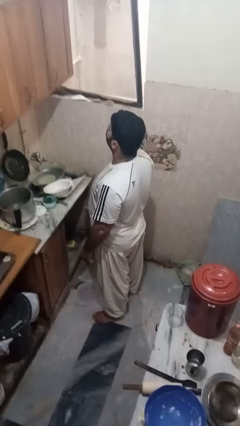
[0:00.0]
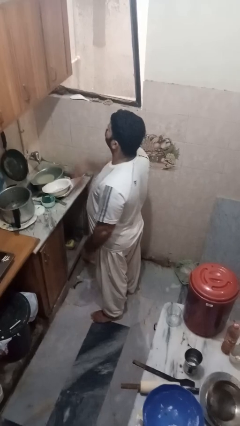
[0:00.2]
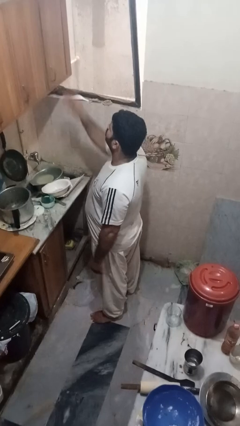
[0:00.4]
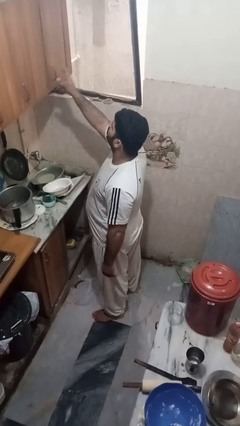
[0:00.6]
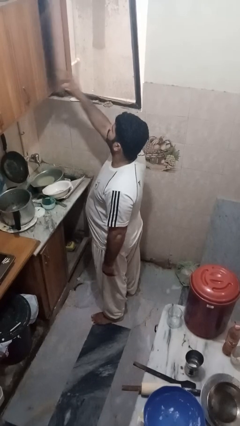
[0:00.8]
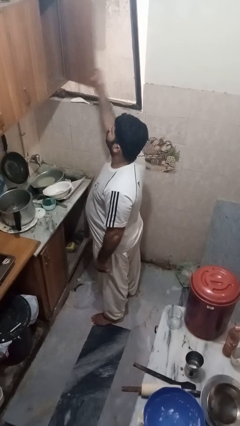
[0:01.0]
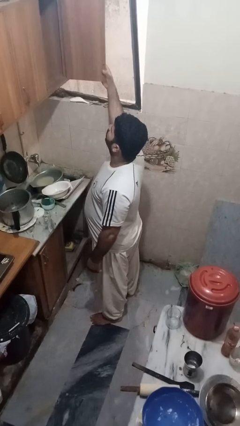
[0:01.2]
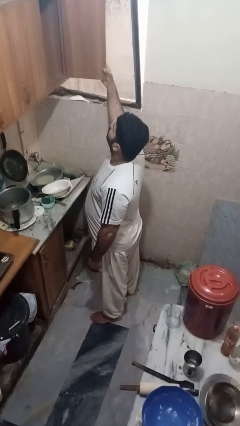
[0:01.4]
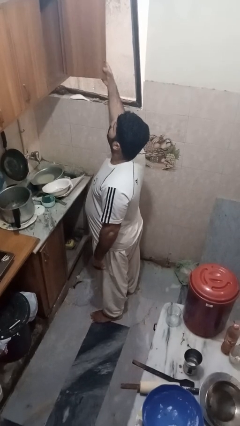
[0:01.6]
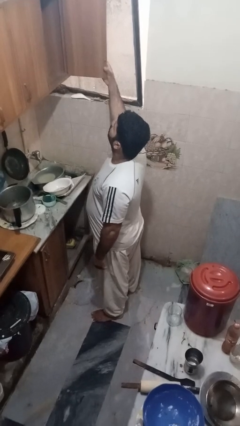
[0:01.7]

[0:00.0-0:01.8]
person opens cabinet

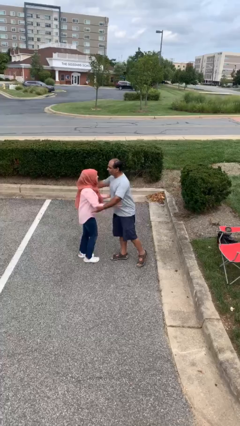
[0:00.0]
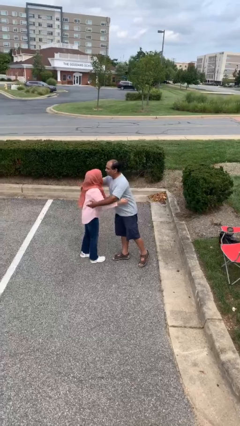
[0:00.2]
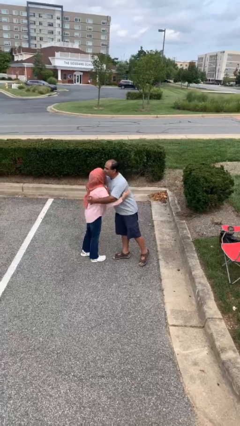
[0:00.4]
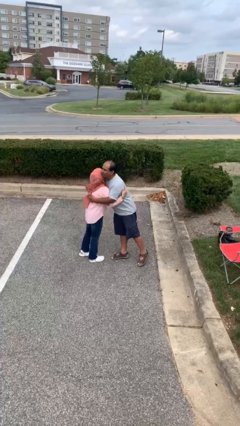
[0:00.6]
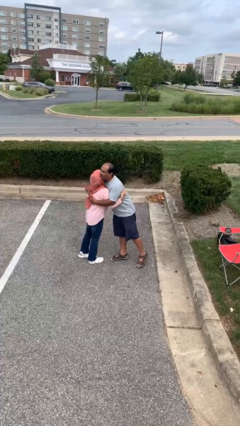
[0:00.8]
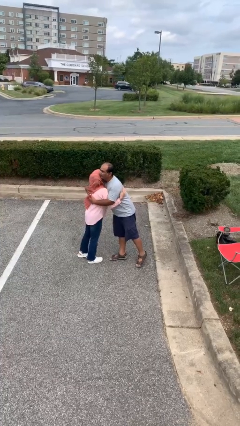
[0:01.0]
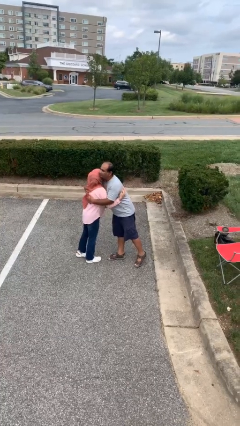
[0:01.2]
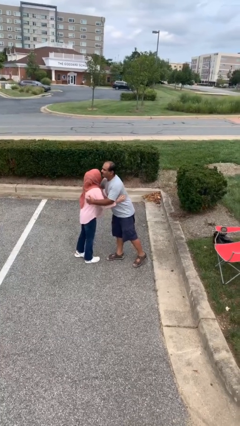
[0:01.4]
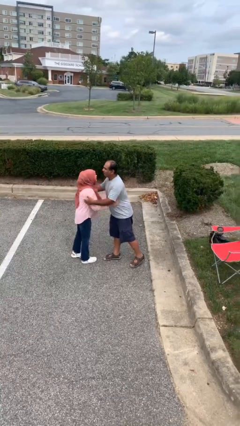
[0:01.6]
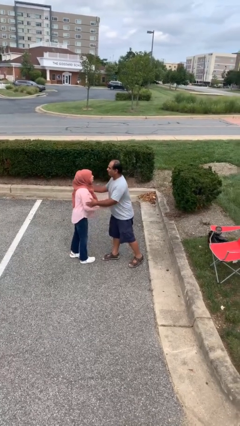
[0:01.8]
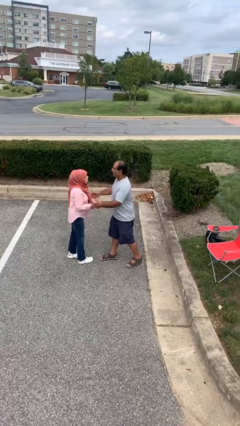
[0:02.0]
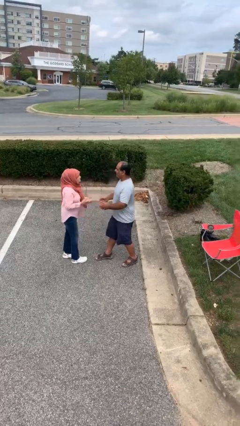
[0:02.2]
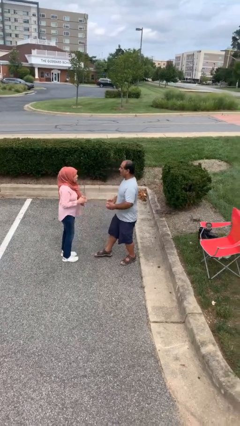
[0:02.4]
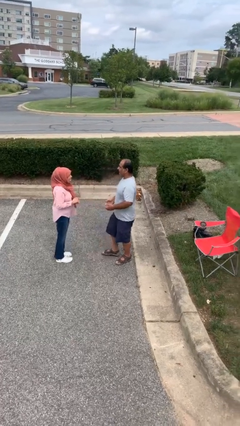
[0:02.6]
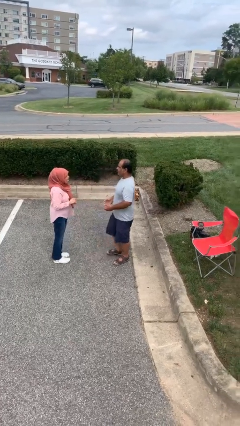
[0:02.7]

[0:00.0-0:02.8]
person embraces person

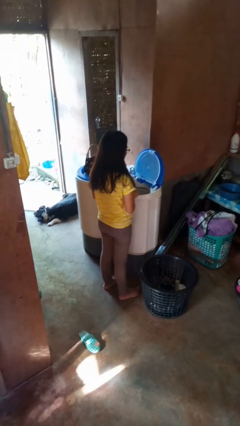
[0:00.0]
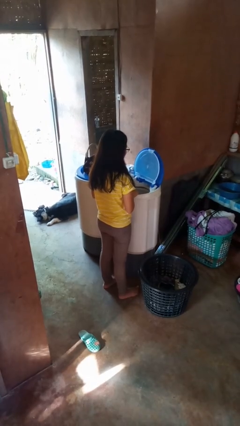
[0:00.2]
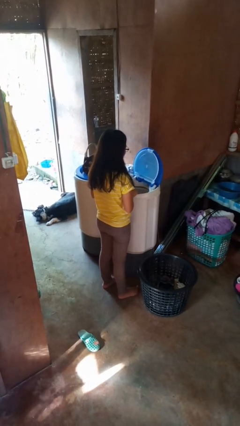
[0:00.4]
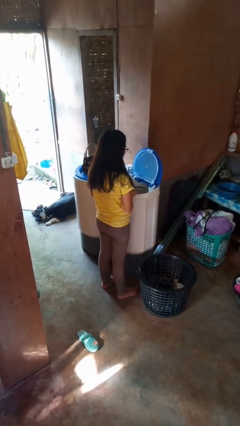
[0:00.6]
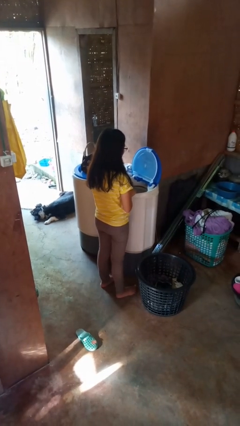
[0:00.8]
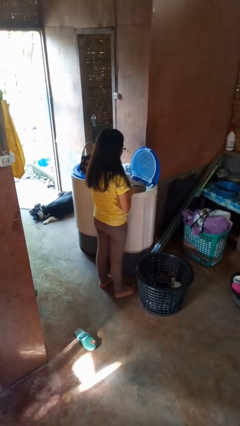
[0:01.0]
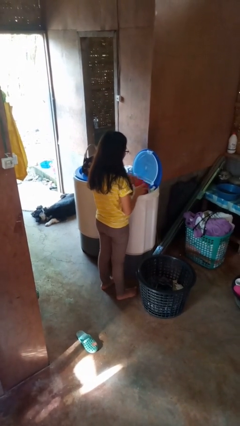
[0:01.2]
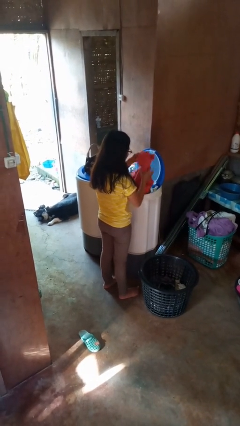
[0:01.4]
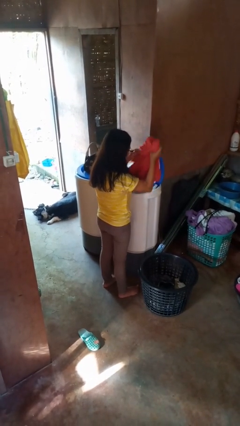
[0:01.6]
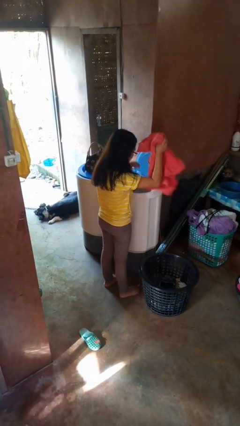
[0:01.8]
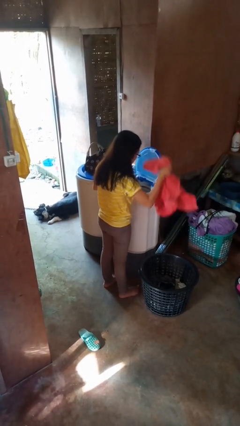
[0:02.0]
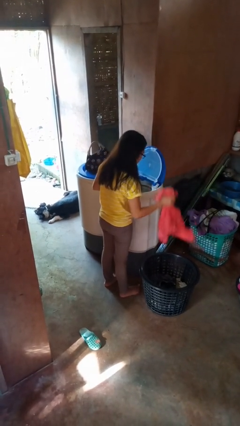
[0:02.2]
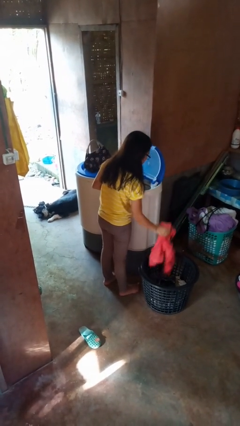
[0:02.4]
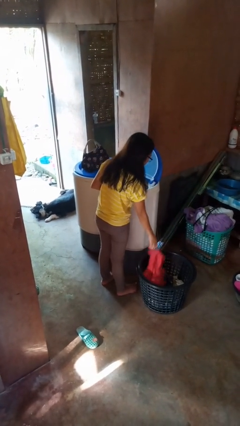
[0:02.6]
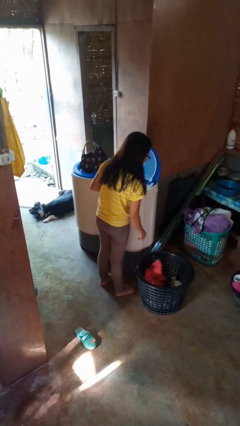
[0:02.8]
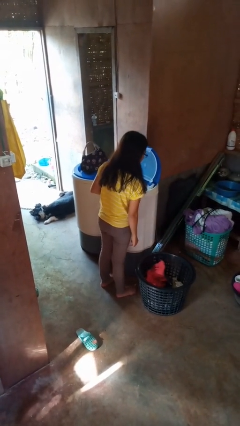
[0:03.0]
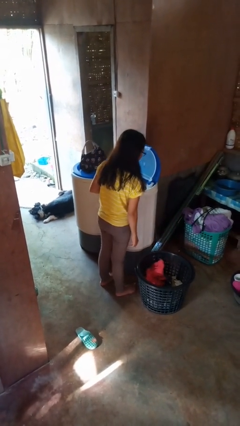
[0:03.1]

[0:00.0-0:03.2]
person unloads clotheswasher

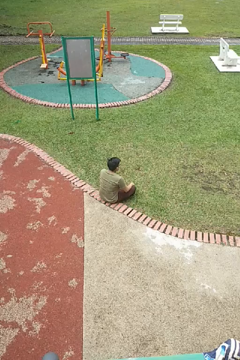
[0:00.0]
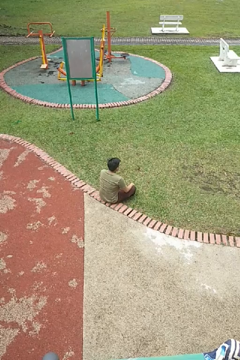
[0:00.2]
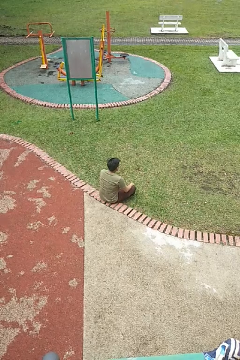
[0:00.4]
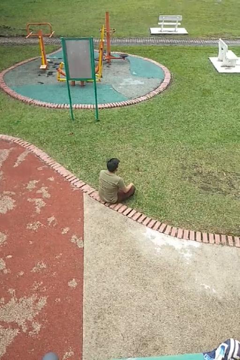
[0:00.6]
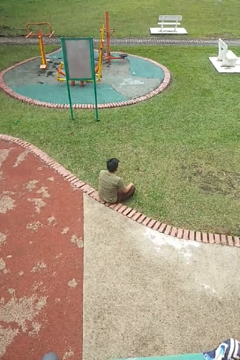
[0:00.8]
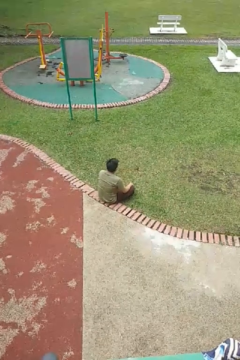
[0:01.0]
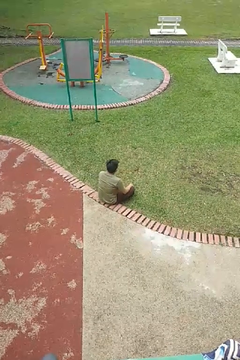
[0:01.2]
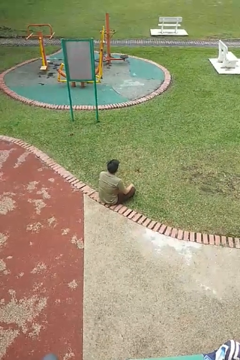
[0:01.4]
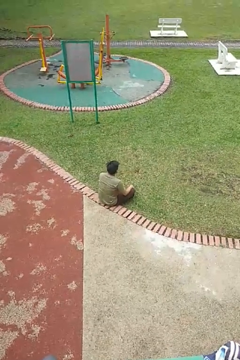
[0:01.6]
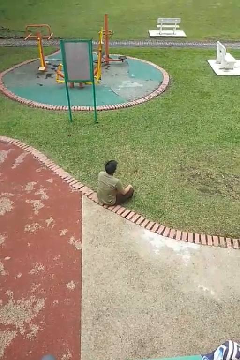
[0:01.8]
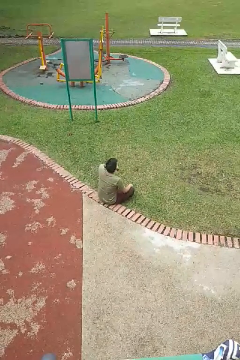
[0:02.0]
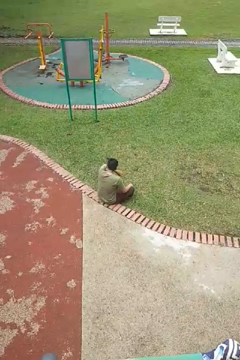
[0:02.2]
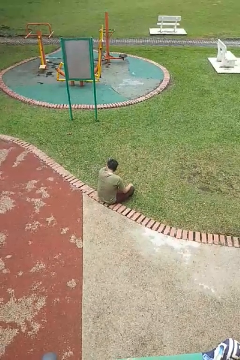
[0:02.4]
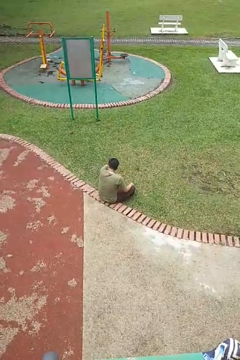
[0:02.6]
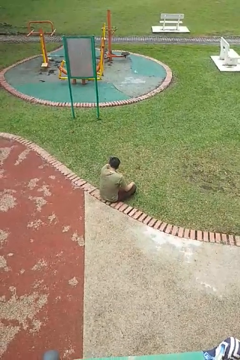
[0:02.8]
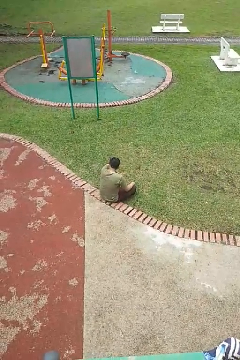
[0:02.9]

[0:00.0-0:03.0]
person sneezes into arm

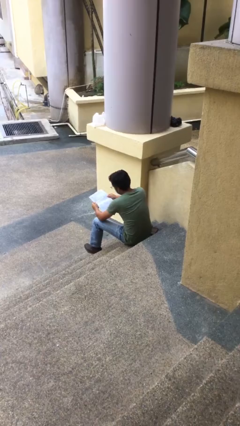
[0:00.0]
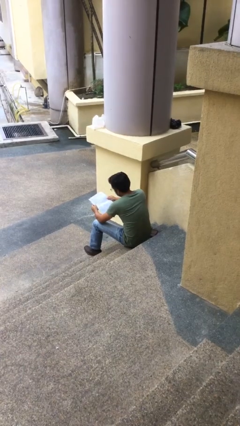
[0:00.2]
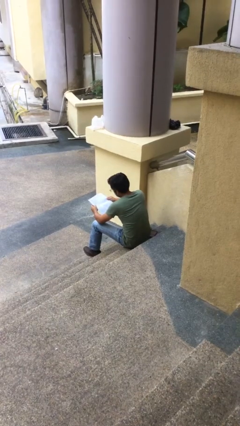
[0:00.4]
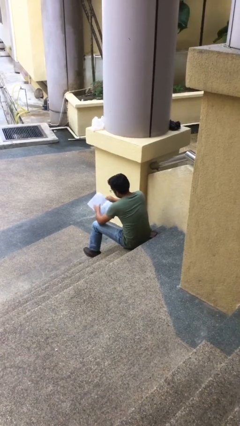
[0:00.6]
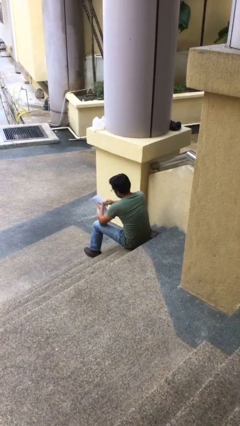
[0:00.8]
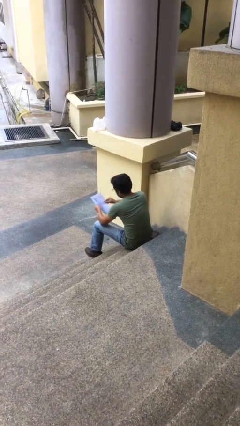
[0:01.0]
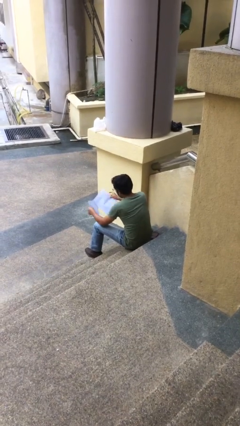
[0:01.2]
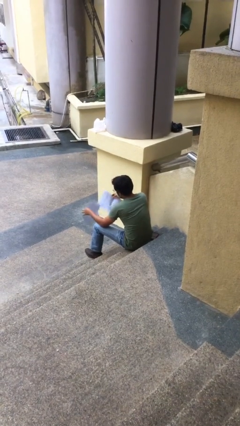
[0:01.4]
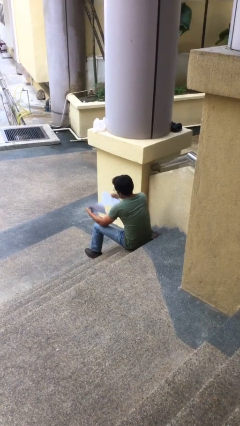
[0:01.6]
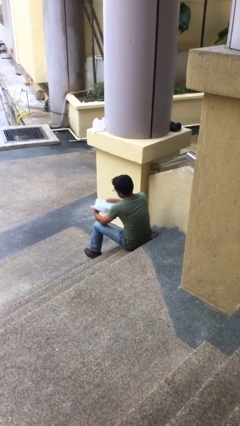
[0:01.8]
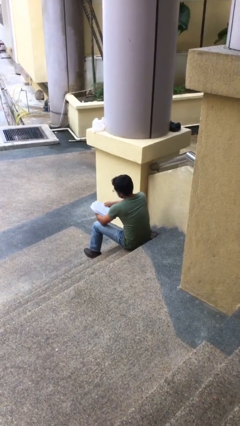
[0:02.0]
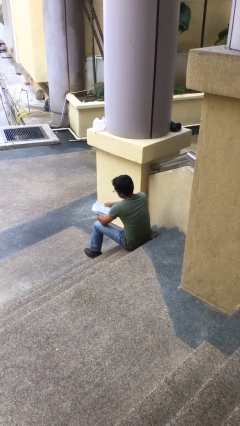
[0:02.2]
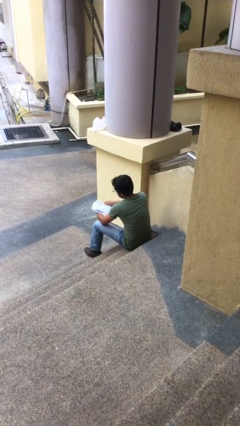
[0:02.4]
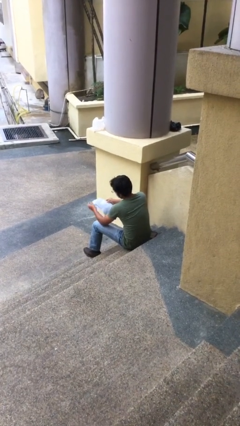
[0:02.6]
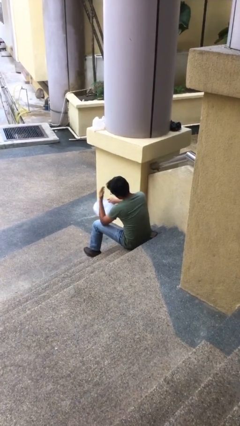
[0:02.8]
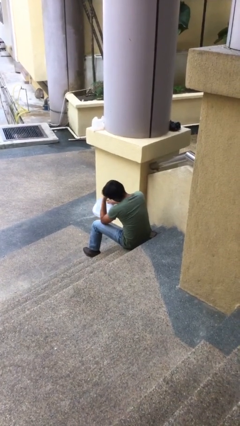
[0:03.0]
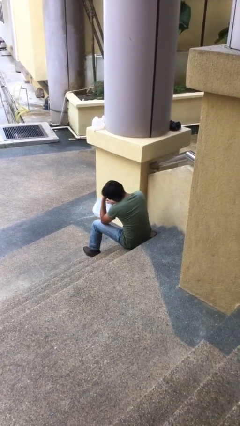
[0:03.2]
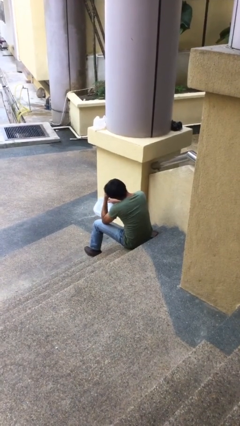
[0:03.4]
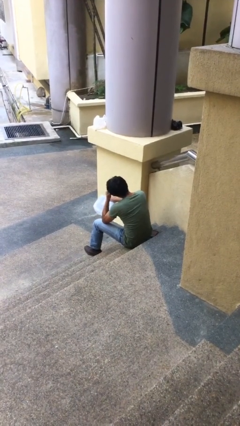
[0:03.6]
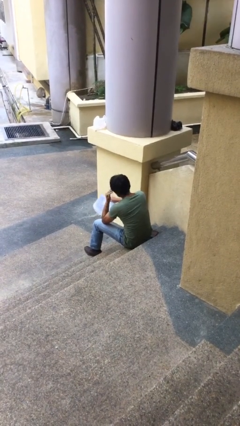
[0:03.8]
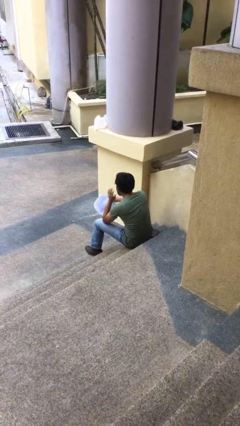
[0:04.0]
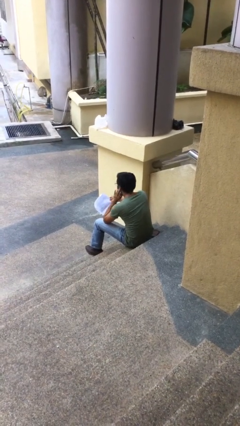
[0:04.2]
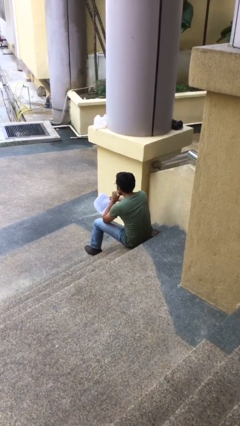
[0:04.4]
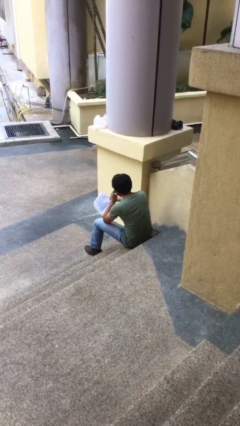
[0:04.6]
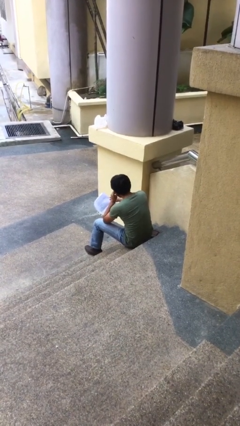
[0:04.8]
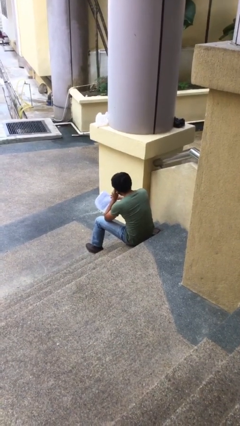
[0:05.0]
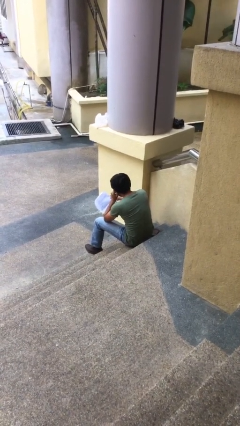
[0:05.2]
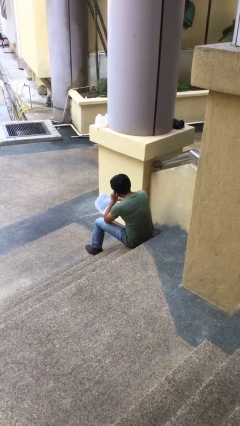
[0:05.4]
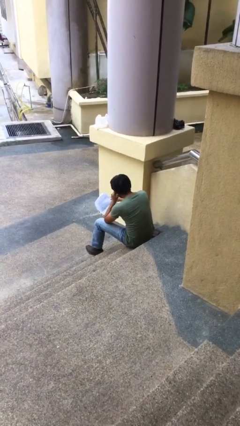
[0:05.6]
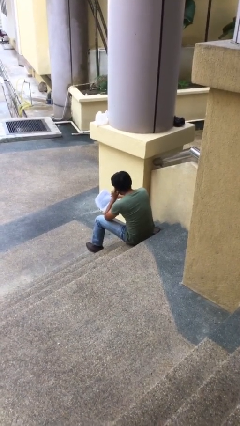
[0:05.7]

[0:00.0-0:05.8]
person reads document

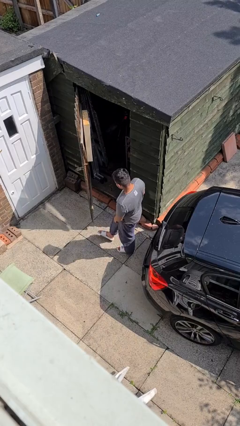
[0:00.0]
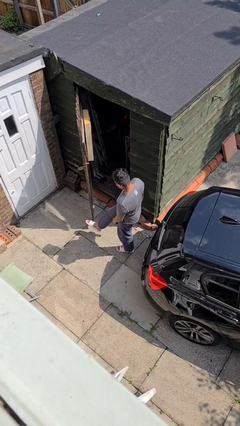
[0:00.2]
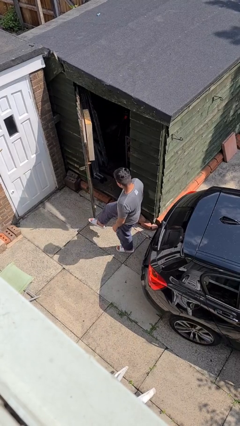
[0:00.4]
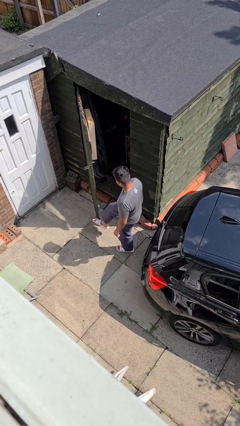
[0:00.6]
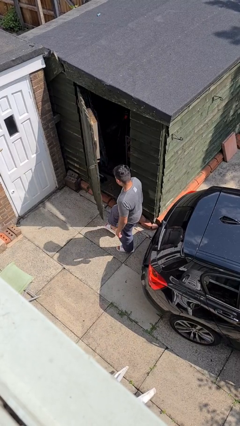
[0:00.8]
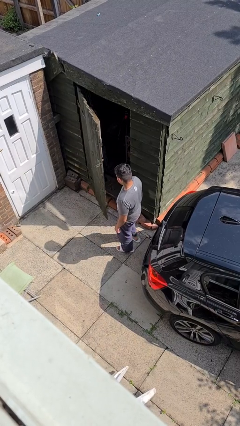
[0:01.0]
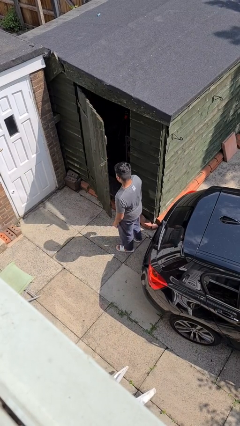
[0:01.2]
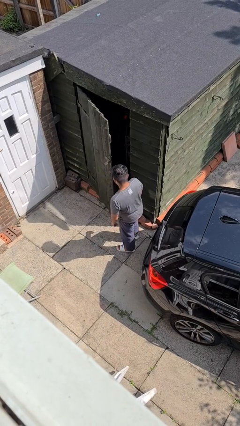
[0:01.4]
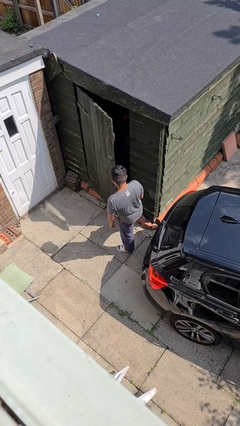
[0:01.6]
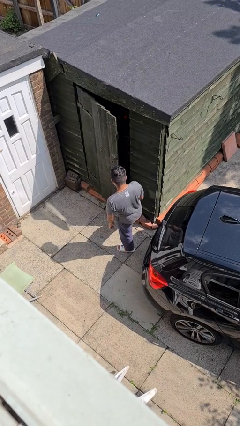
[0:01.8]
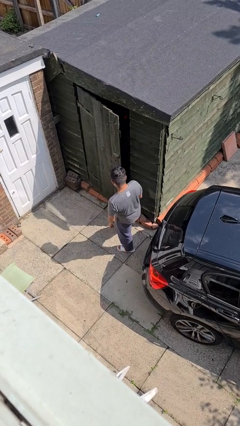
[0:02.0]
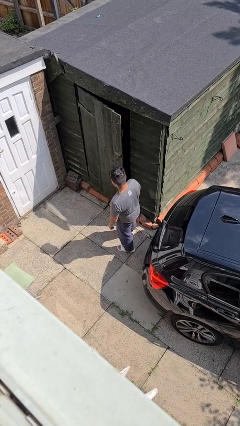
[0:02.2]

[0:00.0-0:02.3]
person closes door with foot
